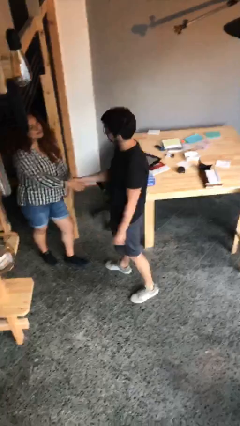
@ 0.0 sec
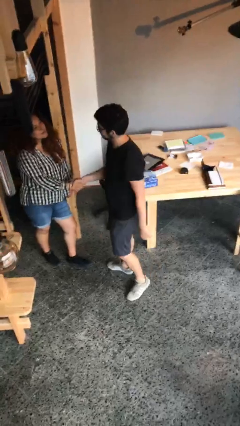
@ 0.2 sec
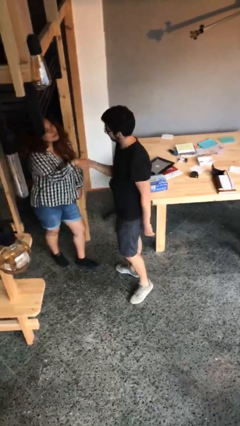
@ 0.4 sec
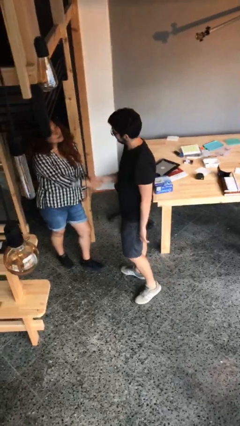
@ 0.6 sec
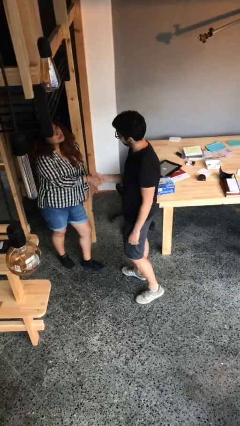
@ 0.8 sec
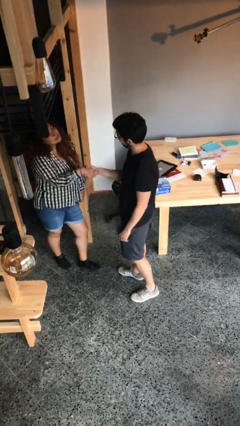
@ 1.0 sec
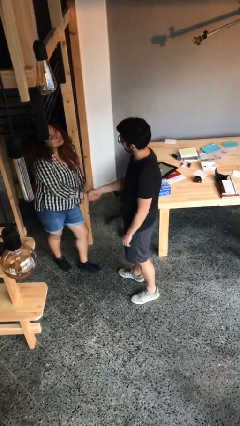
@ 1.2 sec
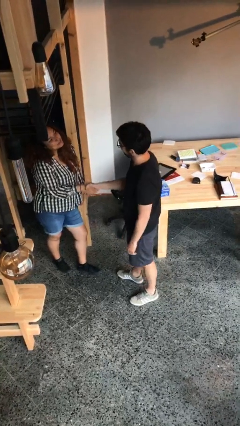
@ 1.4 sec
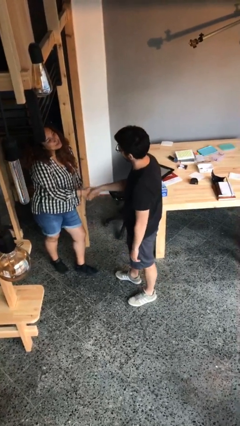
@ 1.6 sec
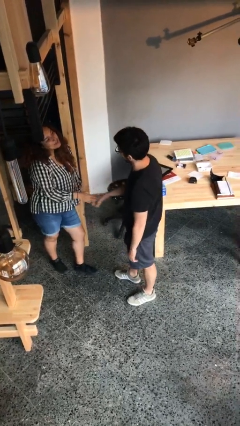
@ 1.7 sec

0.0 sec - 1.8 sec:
person shakes hand

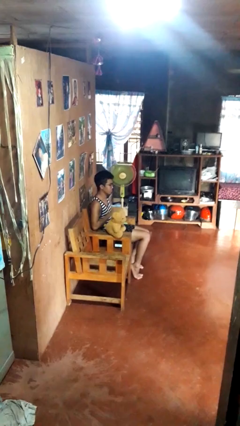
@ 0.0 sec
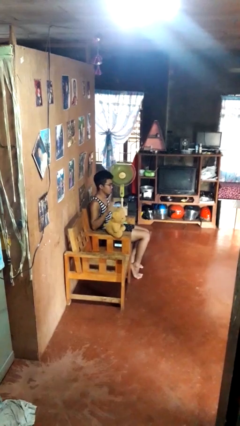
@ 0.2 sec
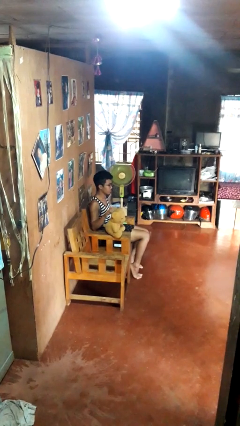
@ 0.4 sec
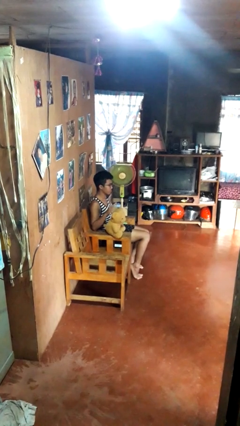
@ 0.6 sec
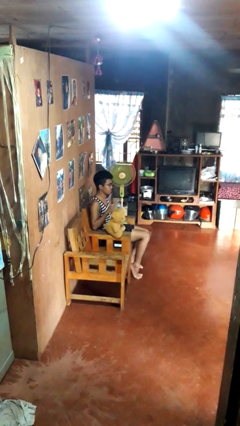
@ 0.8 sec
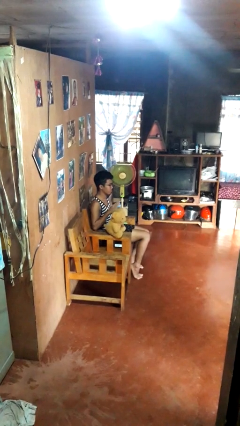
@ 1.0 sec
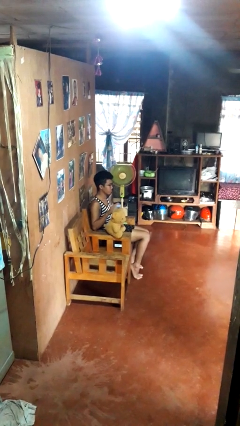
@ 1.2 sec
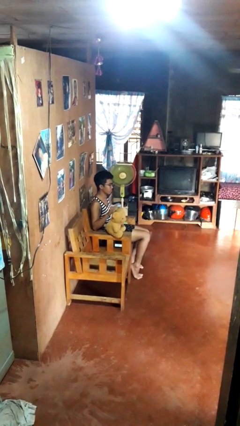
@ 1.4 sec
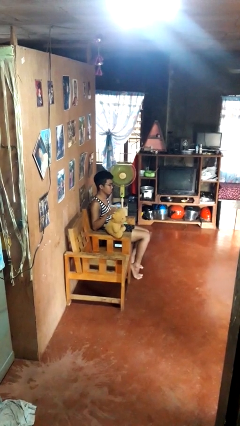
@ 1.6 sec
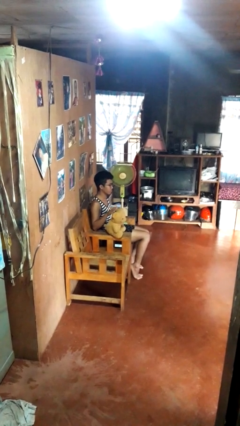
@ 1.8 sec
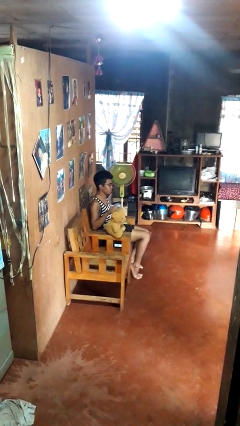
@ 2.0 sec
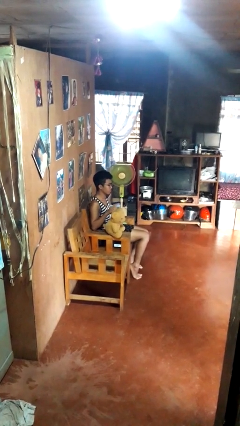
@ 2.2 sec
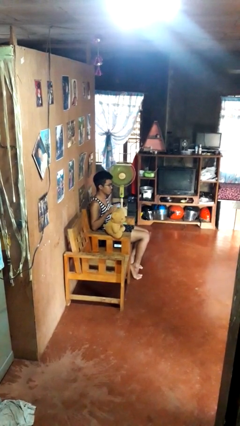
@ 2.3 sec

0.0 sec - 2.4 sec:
person waves hand over object

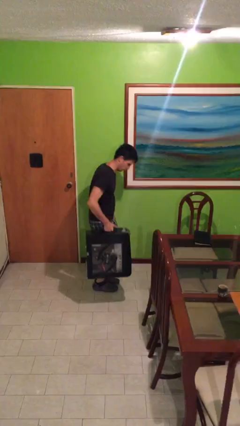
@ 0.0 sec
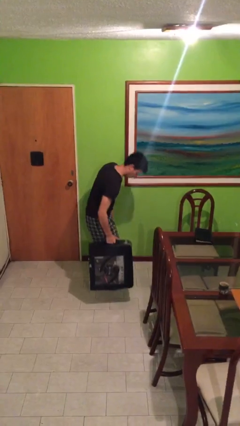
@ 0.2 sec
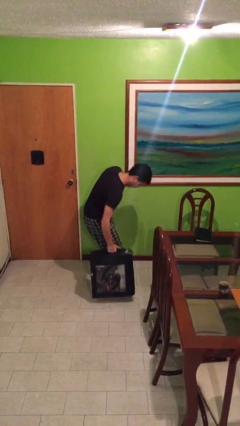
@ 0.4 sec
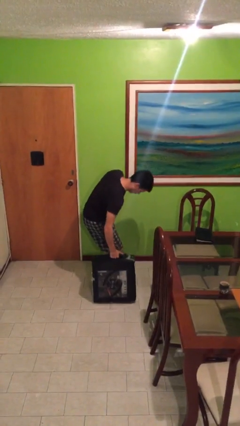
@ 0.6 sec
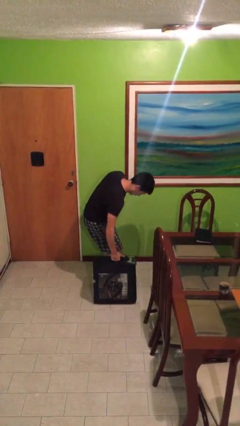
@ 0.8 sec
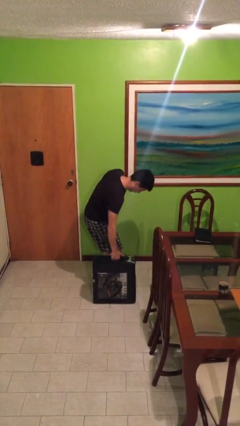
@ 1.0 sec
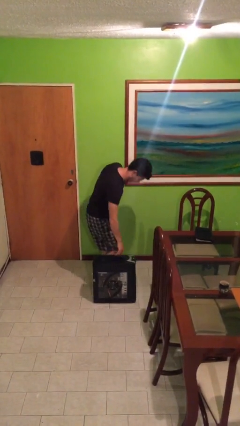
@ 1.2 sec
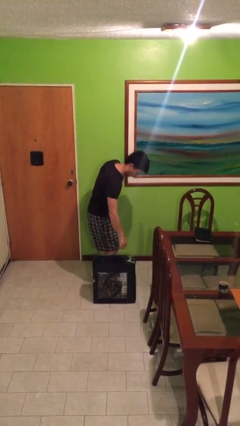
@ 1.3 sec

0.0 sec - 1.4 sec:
person puts down object on floor

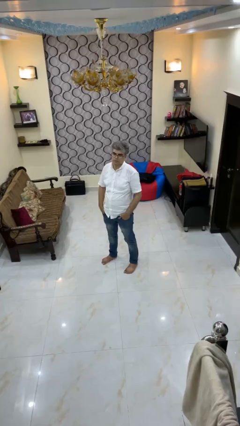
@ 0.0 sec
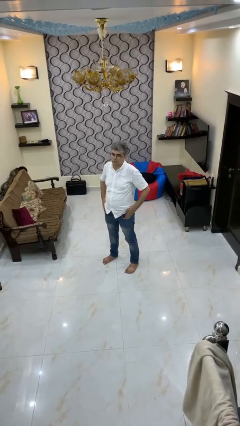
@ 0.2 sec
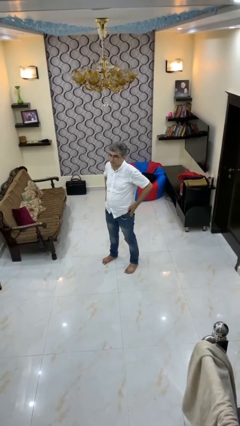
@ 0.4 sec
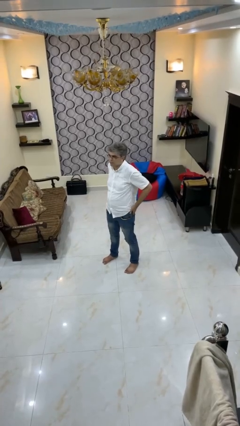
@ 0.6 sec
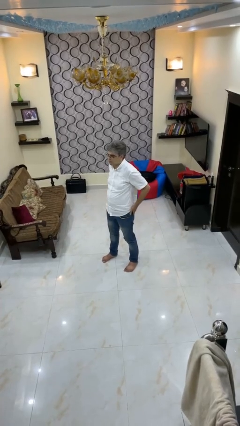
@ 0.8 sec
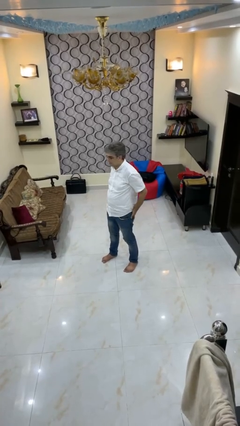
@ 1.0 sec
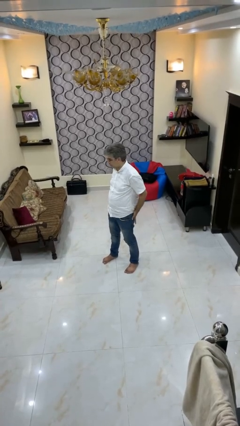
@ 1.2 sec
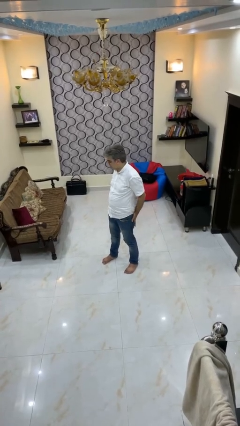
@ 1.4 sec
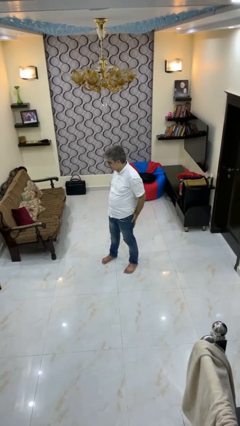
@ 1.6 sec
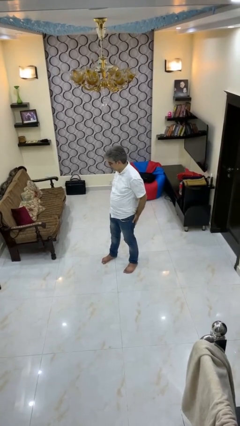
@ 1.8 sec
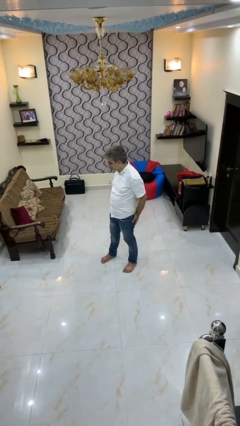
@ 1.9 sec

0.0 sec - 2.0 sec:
person puts hands in back pockets

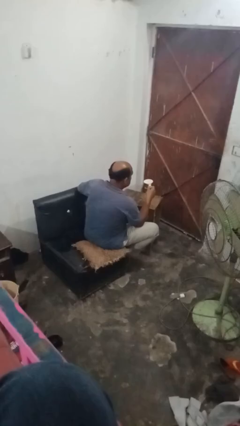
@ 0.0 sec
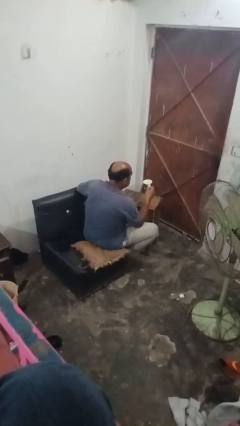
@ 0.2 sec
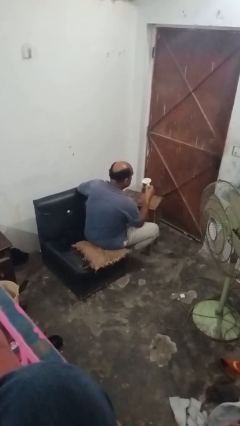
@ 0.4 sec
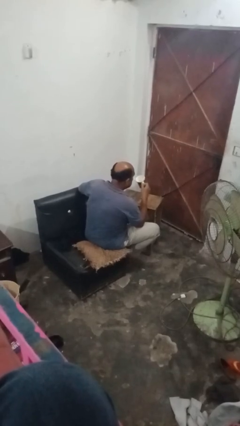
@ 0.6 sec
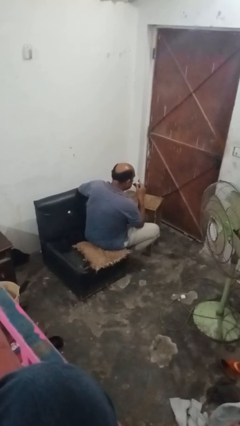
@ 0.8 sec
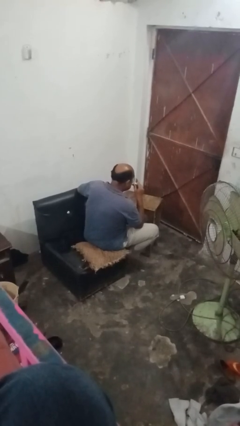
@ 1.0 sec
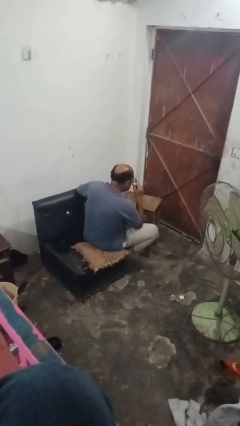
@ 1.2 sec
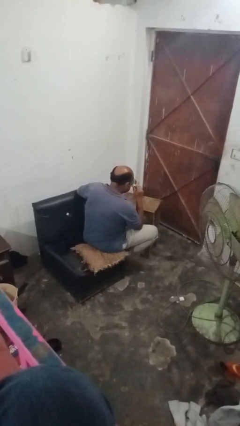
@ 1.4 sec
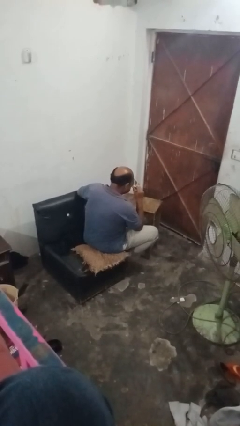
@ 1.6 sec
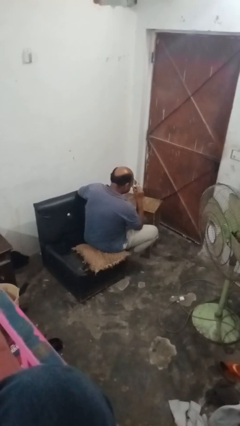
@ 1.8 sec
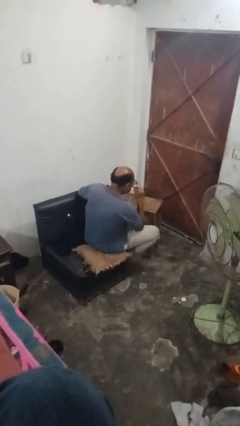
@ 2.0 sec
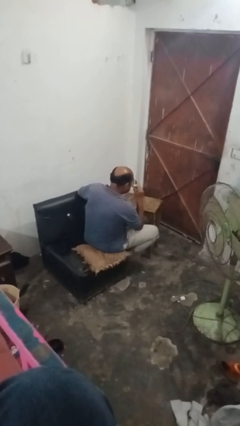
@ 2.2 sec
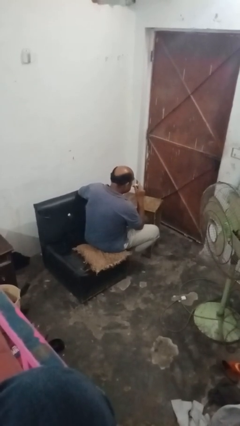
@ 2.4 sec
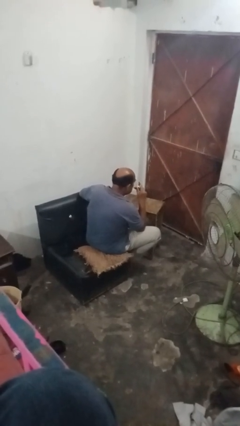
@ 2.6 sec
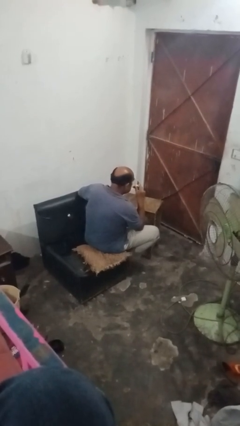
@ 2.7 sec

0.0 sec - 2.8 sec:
person drinks from mug

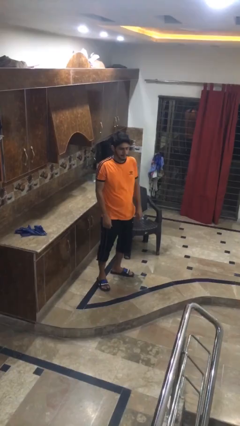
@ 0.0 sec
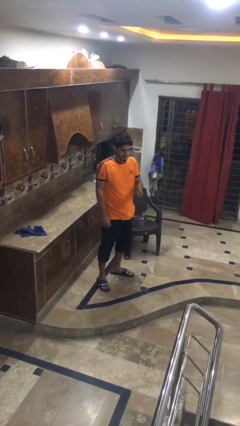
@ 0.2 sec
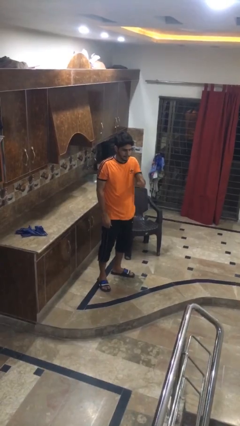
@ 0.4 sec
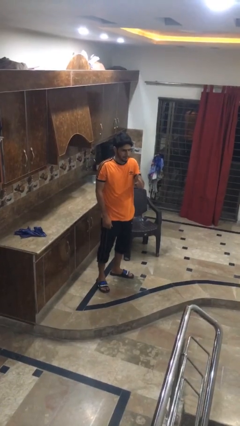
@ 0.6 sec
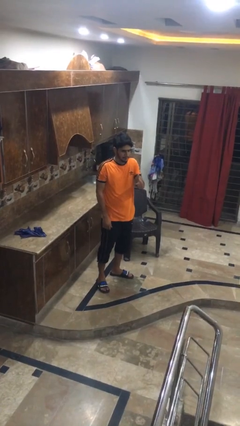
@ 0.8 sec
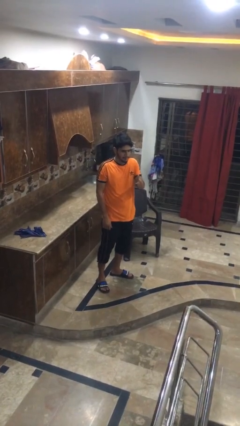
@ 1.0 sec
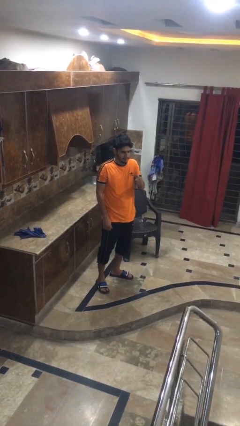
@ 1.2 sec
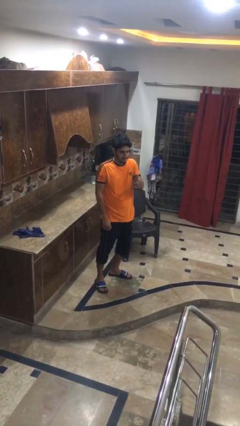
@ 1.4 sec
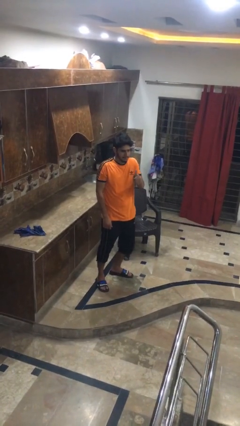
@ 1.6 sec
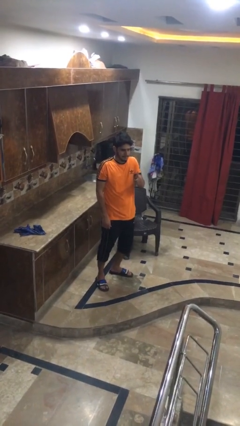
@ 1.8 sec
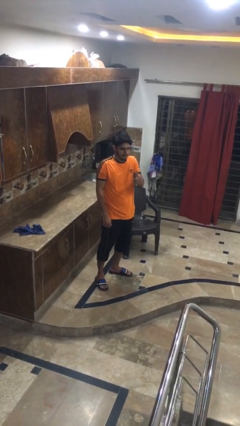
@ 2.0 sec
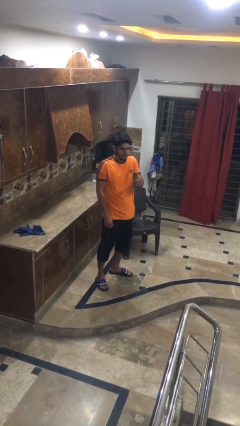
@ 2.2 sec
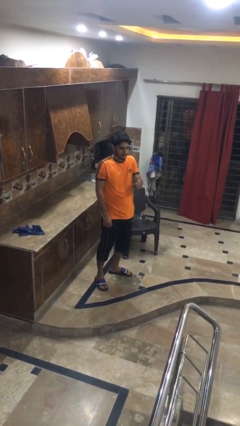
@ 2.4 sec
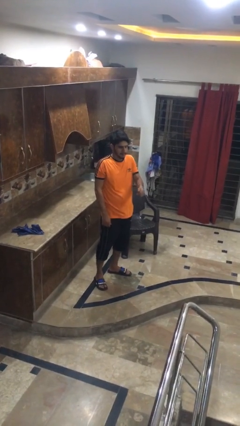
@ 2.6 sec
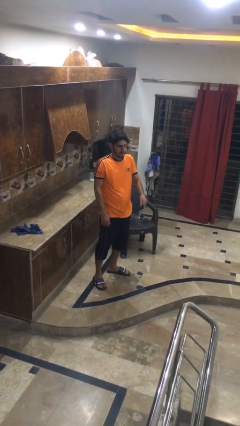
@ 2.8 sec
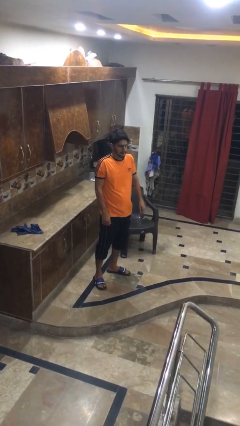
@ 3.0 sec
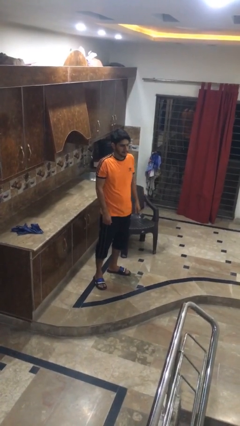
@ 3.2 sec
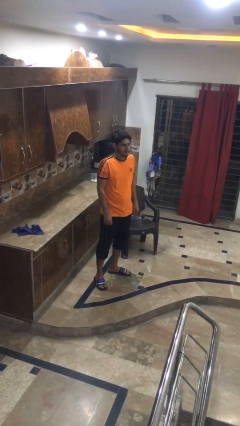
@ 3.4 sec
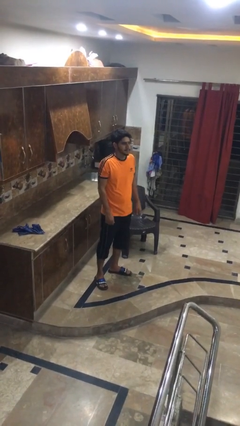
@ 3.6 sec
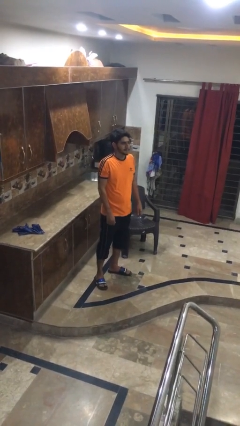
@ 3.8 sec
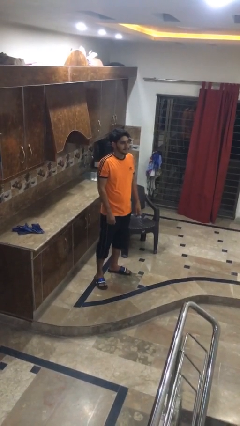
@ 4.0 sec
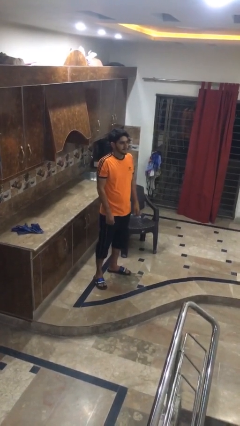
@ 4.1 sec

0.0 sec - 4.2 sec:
person gestures thumbs up

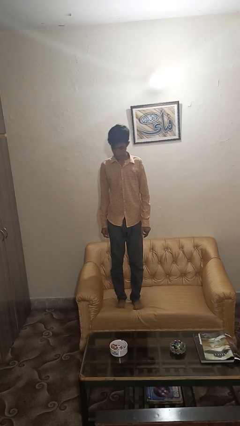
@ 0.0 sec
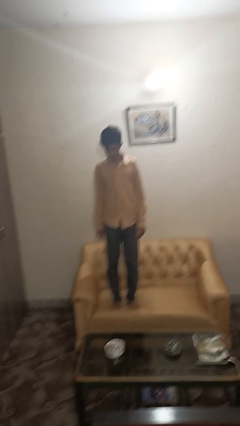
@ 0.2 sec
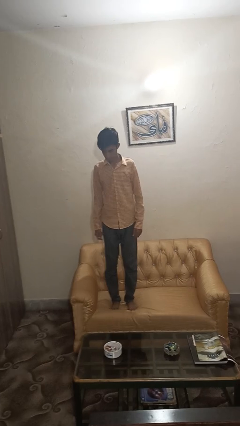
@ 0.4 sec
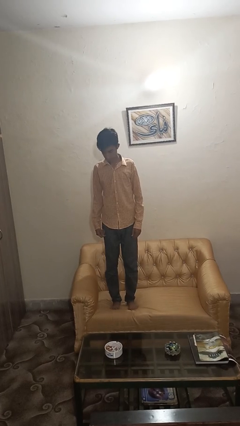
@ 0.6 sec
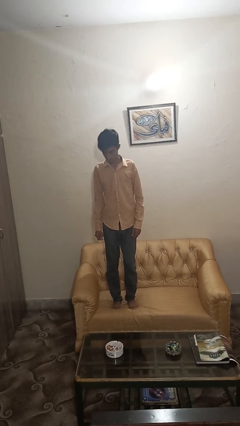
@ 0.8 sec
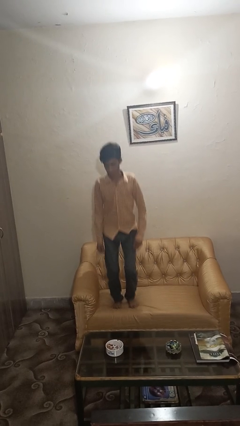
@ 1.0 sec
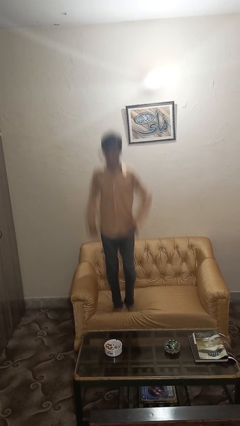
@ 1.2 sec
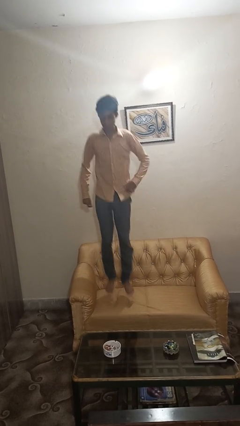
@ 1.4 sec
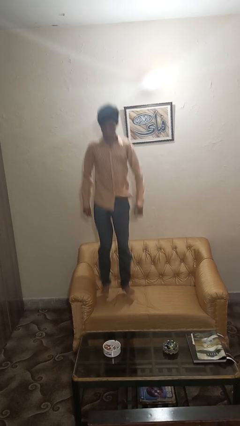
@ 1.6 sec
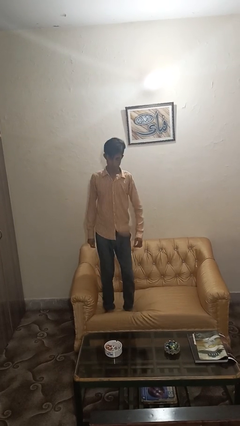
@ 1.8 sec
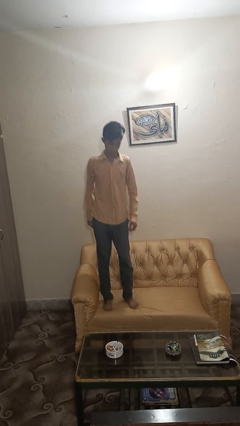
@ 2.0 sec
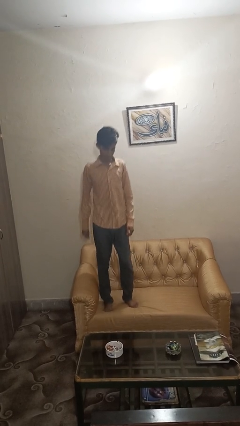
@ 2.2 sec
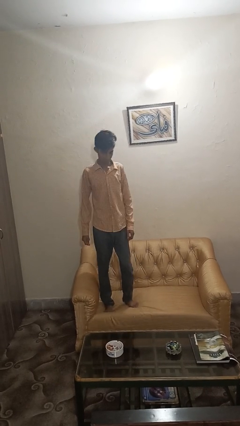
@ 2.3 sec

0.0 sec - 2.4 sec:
person jumps on couch
